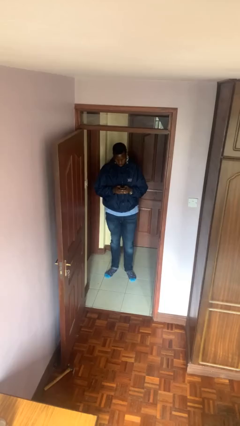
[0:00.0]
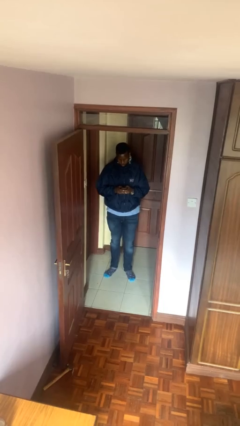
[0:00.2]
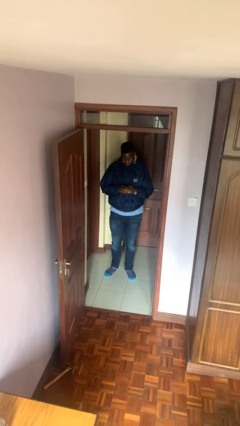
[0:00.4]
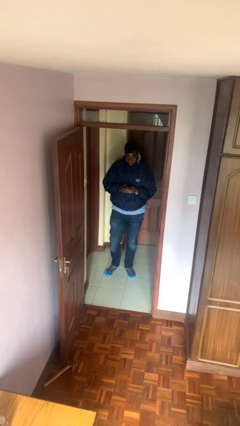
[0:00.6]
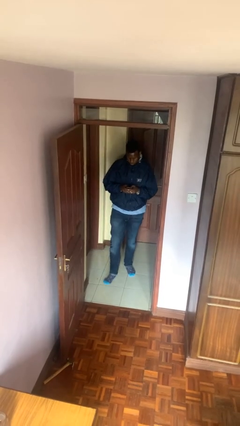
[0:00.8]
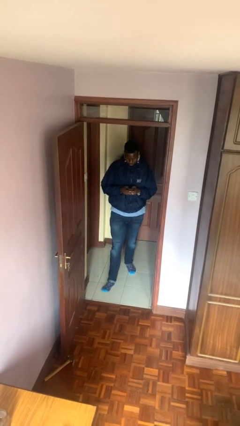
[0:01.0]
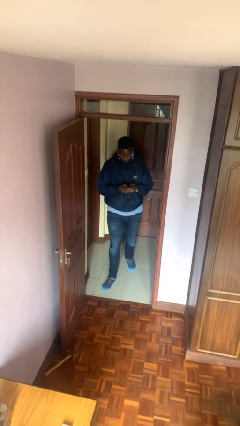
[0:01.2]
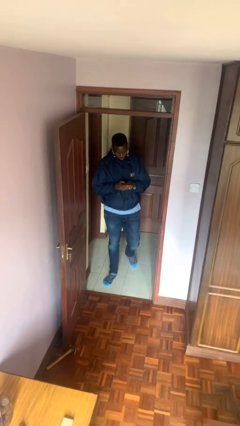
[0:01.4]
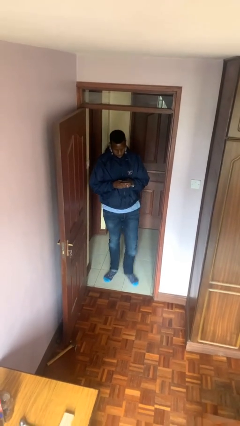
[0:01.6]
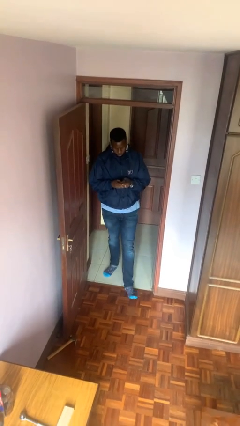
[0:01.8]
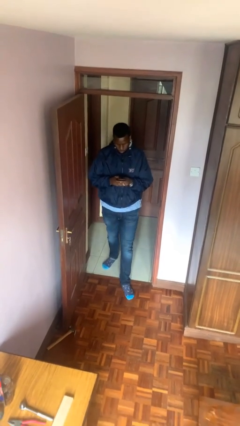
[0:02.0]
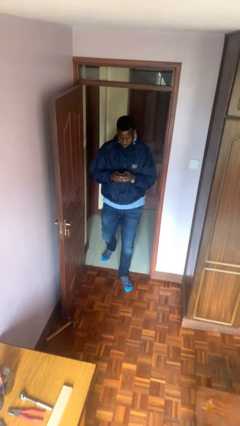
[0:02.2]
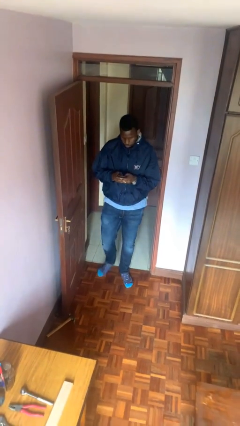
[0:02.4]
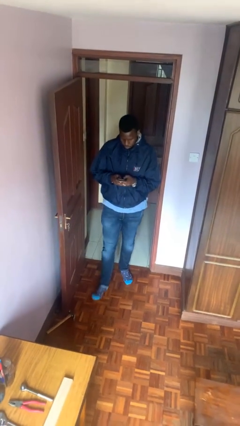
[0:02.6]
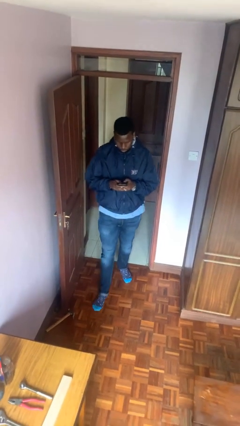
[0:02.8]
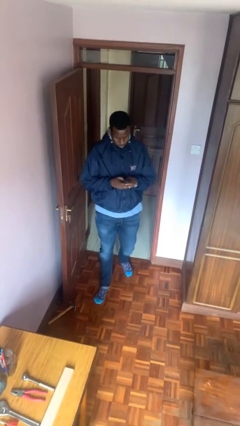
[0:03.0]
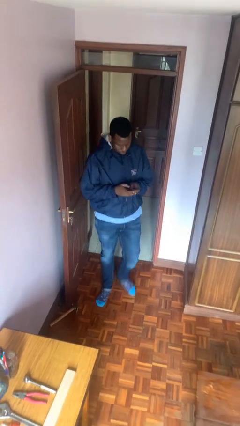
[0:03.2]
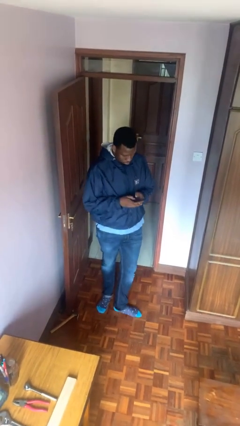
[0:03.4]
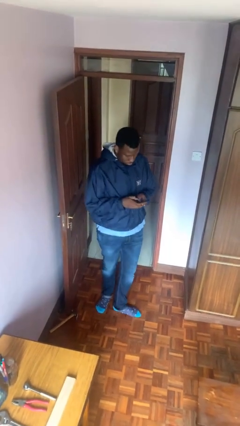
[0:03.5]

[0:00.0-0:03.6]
person enters scene through structure

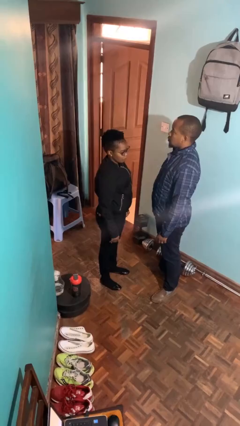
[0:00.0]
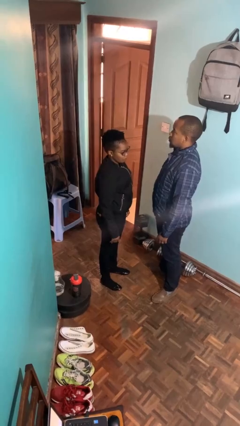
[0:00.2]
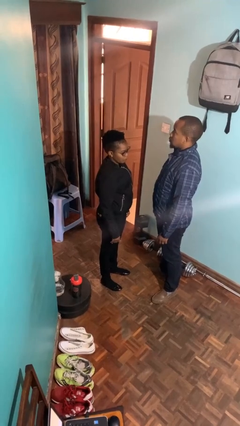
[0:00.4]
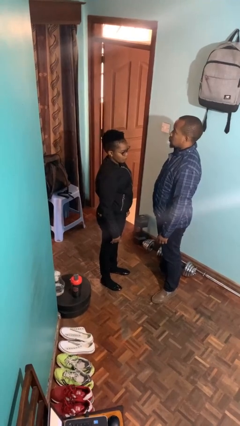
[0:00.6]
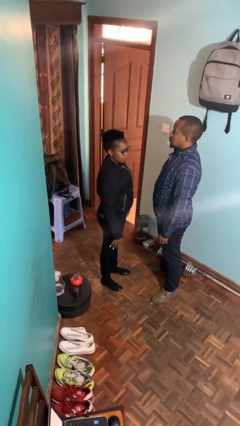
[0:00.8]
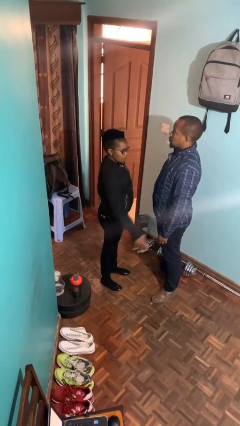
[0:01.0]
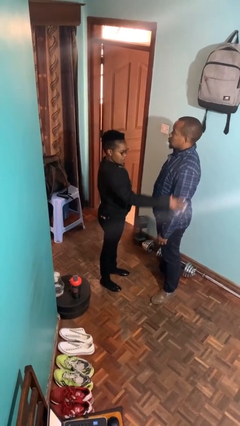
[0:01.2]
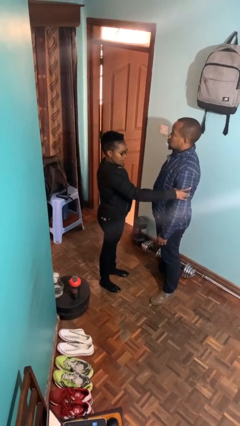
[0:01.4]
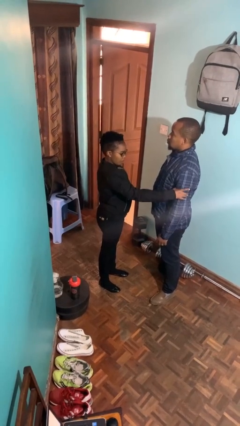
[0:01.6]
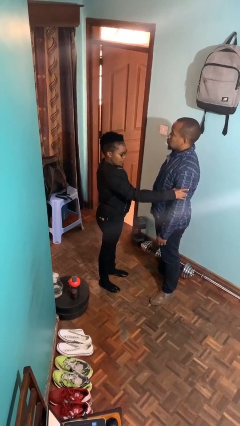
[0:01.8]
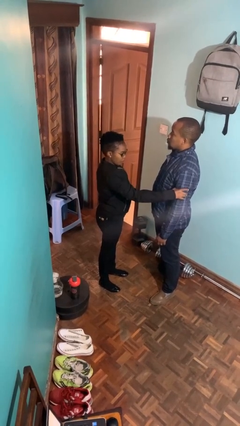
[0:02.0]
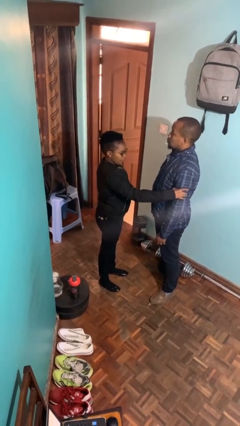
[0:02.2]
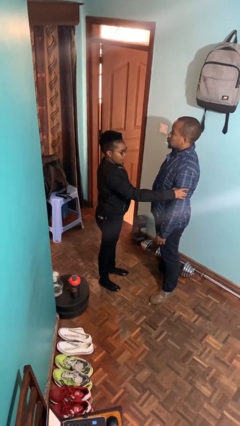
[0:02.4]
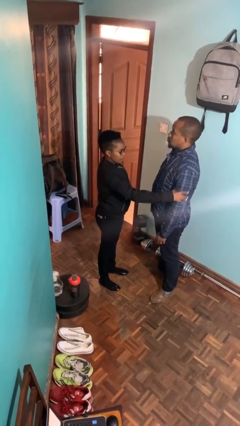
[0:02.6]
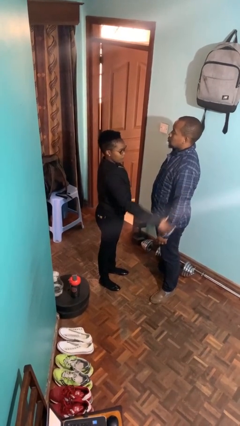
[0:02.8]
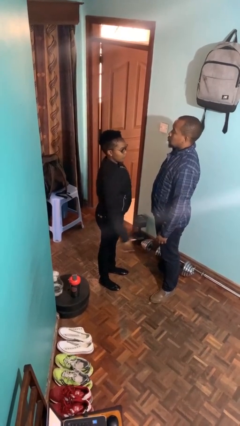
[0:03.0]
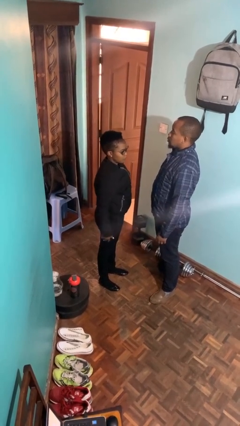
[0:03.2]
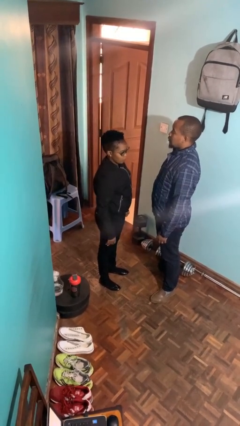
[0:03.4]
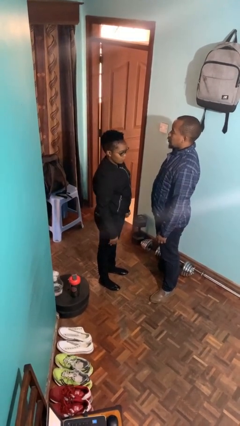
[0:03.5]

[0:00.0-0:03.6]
person grabs person by bicep

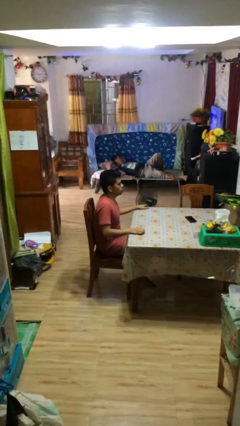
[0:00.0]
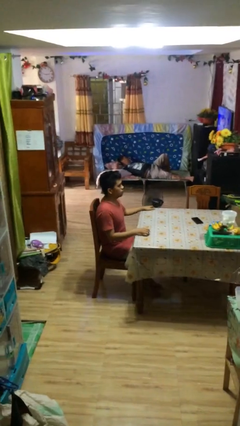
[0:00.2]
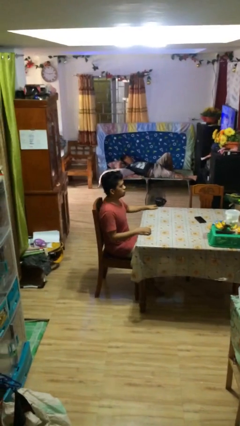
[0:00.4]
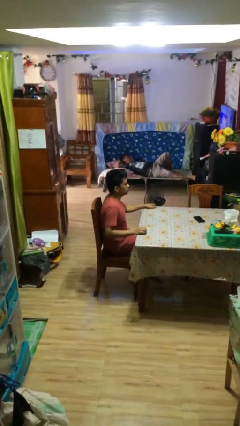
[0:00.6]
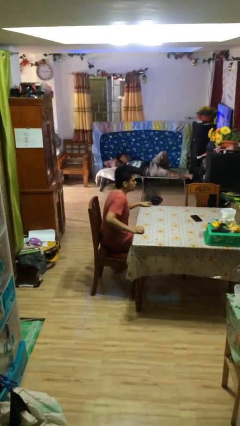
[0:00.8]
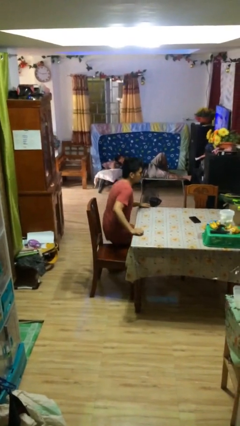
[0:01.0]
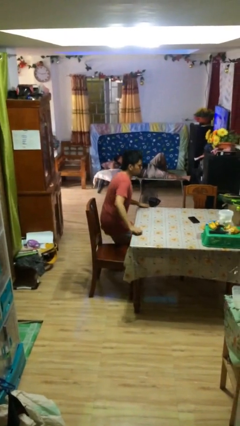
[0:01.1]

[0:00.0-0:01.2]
person sits down

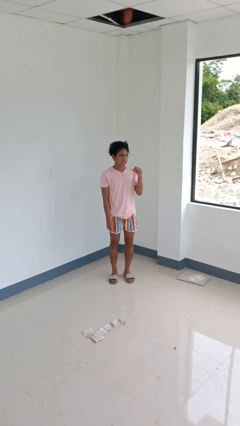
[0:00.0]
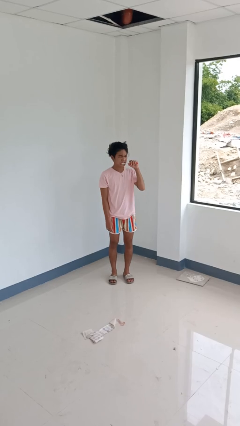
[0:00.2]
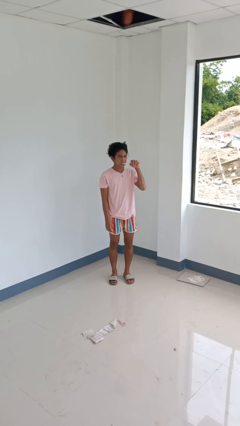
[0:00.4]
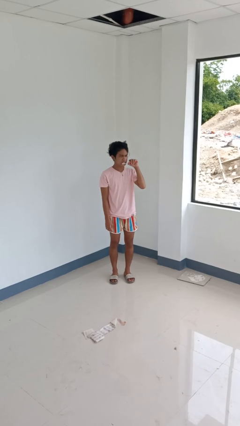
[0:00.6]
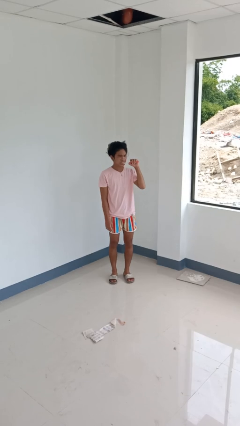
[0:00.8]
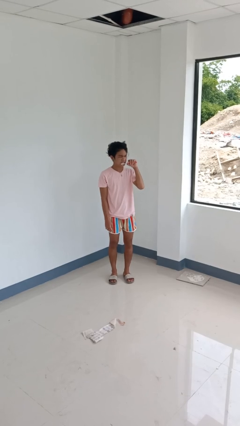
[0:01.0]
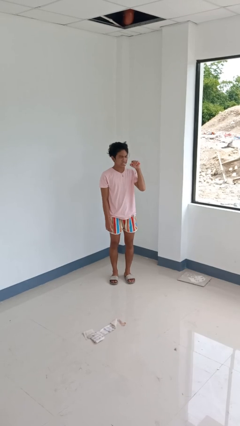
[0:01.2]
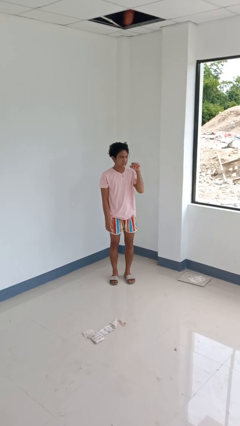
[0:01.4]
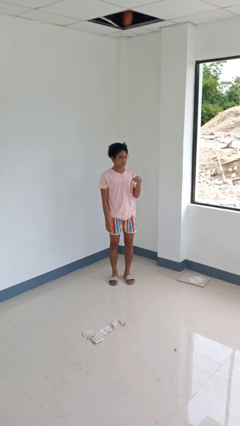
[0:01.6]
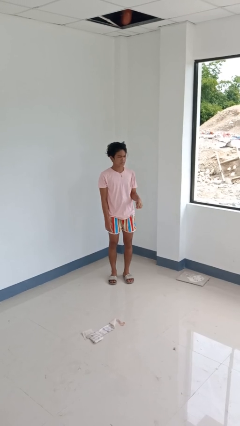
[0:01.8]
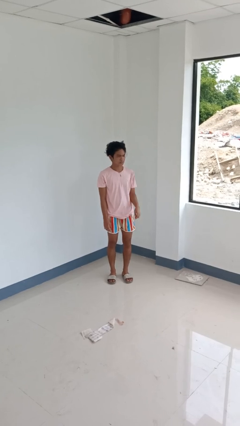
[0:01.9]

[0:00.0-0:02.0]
person brushes teeth

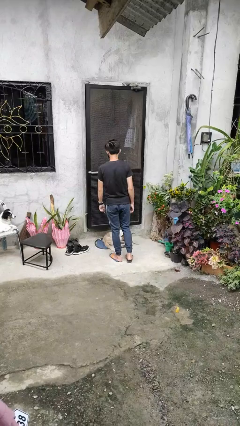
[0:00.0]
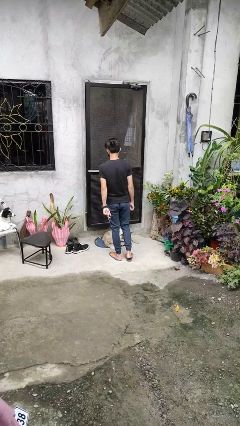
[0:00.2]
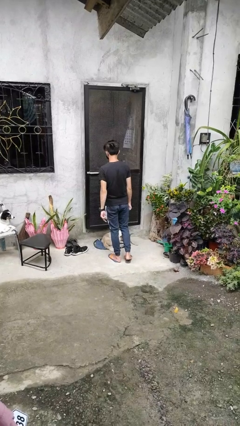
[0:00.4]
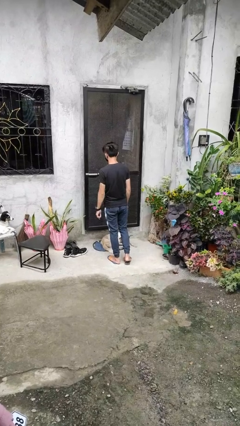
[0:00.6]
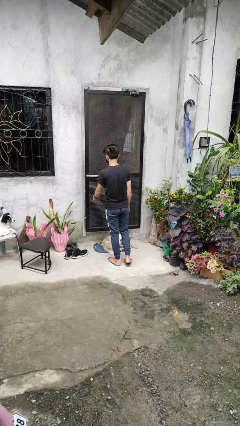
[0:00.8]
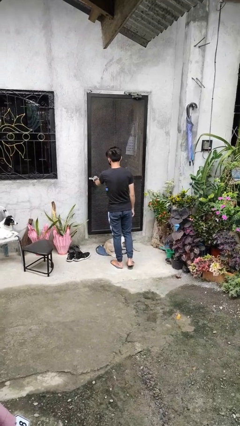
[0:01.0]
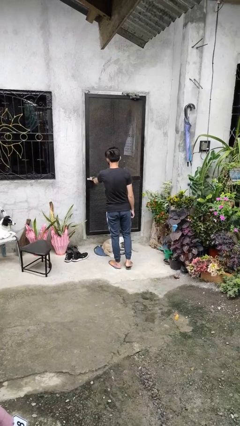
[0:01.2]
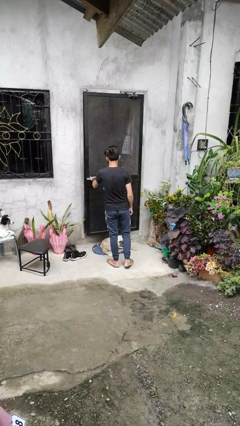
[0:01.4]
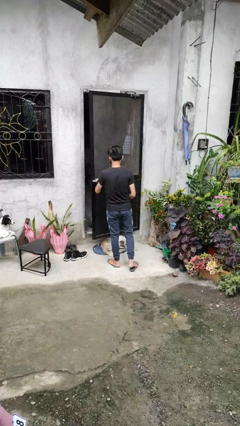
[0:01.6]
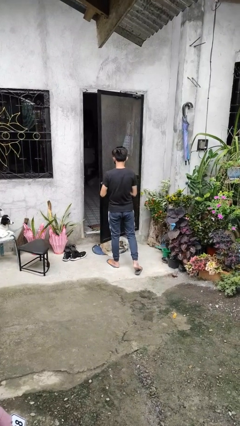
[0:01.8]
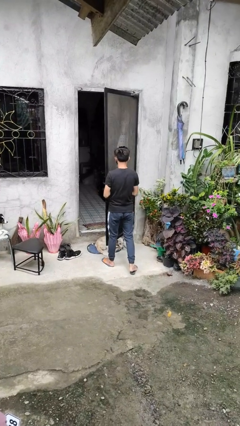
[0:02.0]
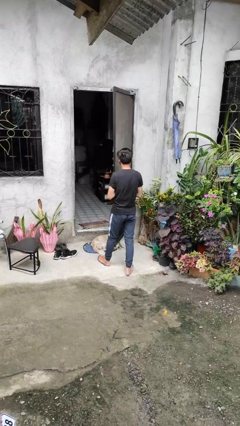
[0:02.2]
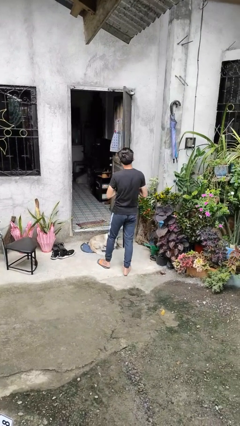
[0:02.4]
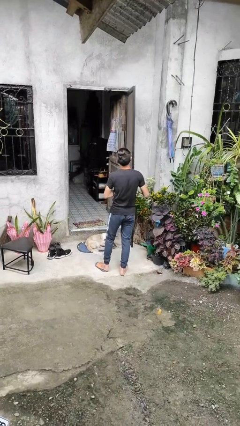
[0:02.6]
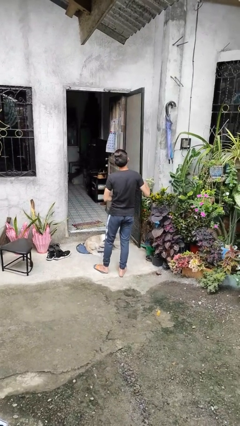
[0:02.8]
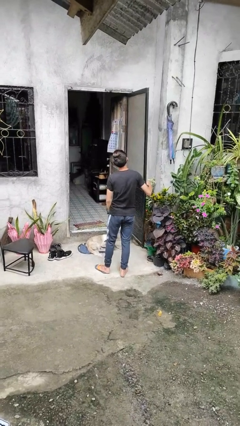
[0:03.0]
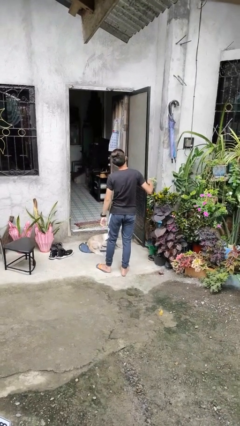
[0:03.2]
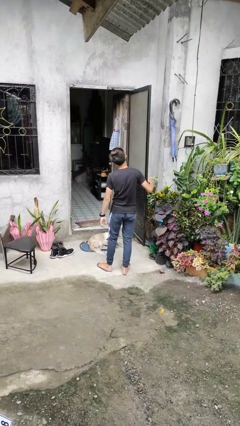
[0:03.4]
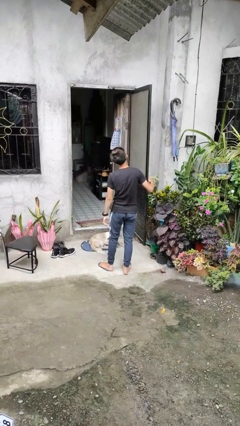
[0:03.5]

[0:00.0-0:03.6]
person opens facility door

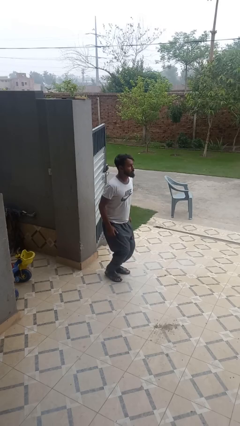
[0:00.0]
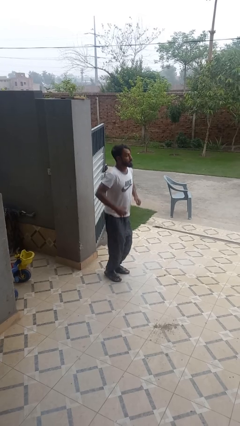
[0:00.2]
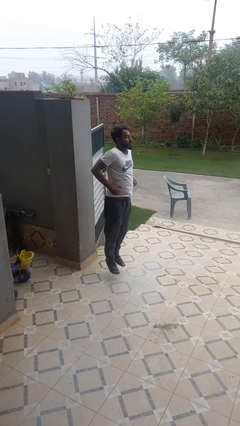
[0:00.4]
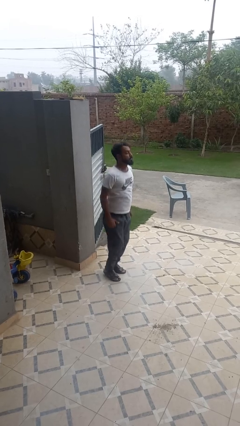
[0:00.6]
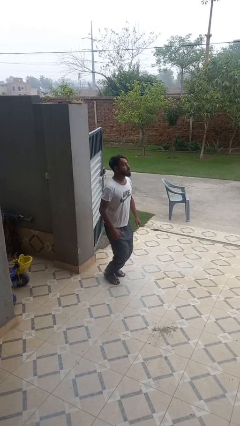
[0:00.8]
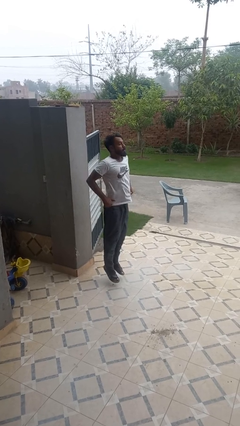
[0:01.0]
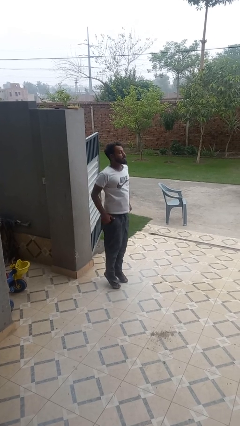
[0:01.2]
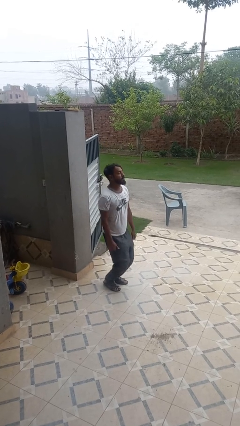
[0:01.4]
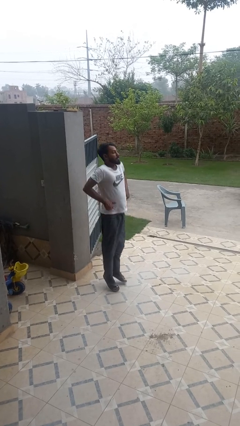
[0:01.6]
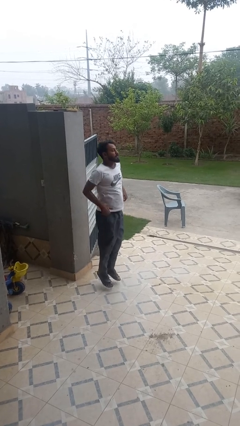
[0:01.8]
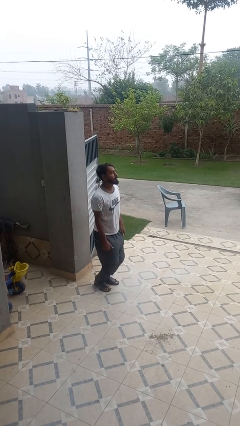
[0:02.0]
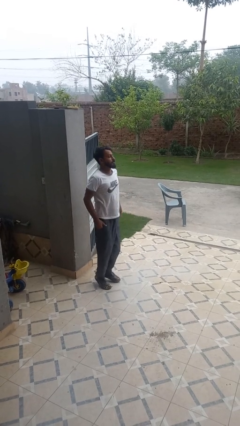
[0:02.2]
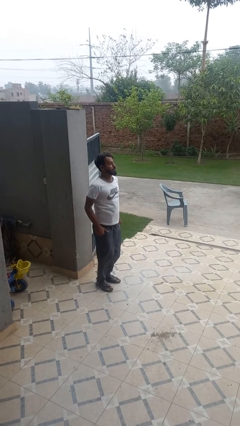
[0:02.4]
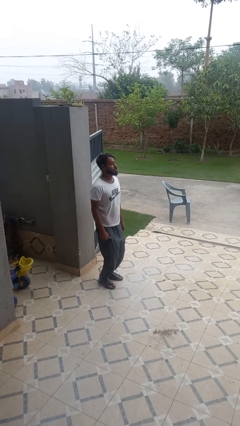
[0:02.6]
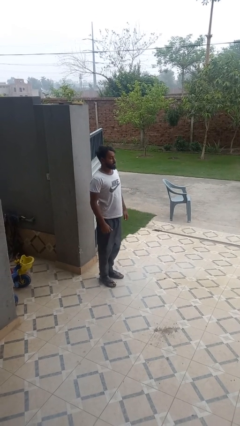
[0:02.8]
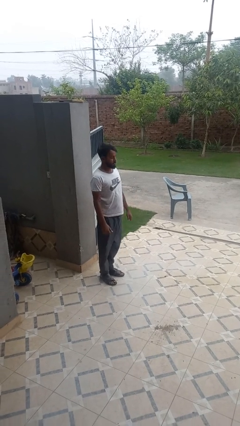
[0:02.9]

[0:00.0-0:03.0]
person jumps

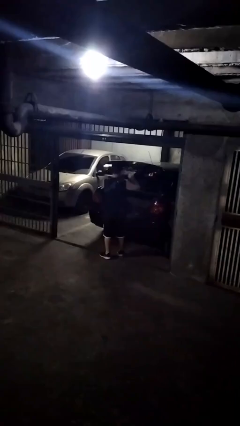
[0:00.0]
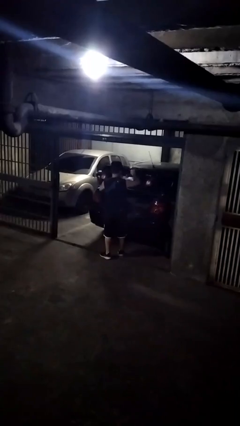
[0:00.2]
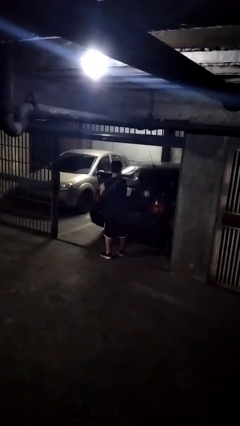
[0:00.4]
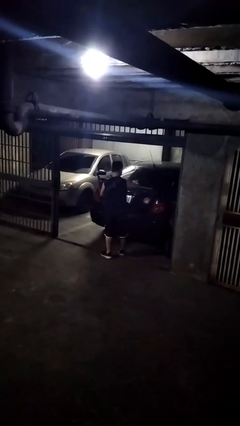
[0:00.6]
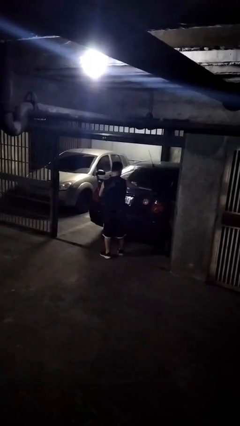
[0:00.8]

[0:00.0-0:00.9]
person closes car trunk
